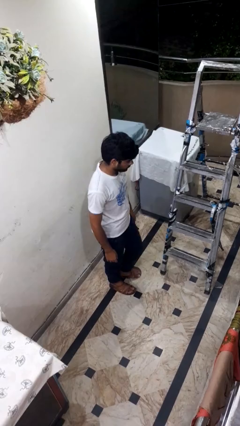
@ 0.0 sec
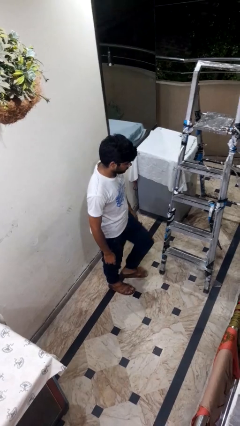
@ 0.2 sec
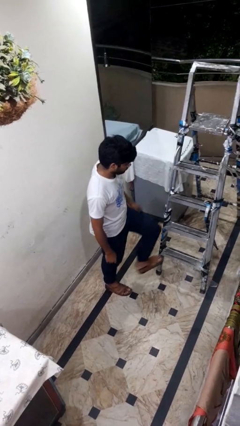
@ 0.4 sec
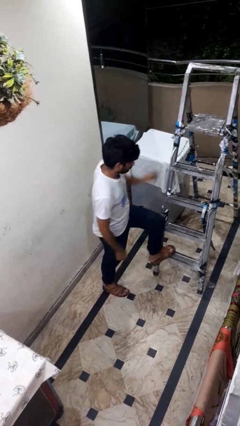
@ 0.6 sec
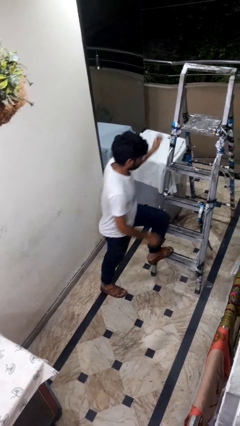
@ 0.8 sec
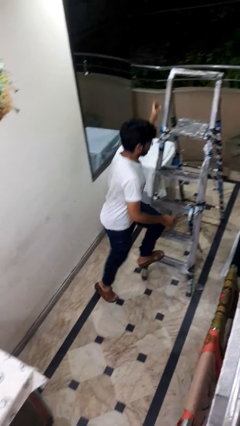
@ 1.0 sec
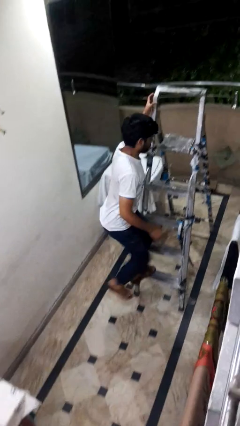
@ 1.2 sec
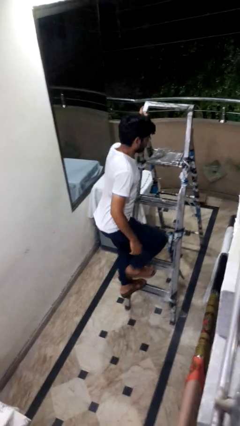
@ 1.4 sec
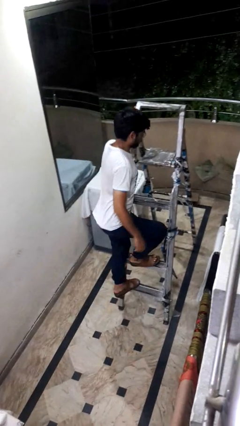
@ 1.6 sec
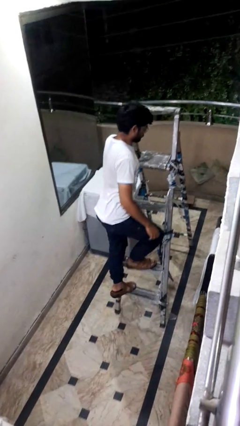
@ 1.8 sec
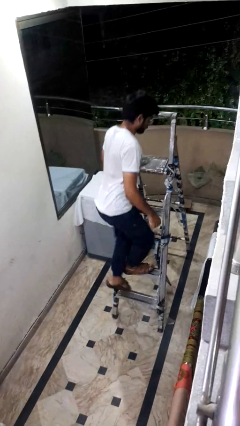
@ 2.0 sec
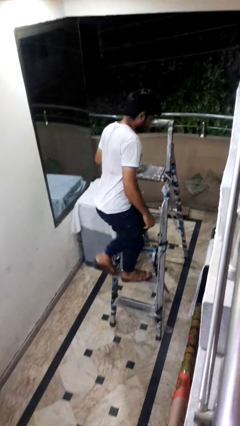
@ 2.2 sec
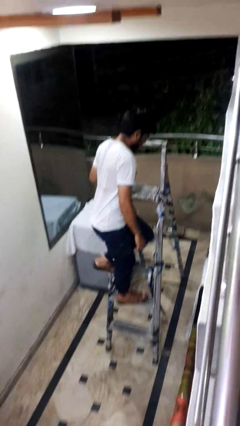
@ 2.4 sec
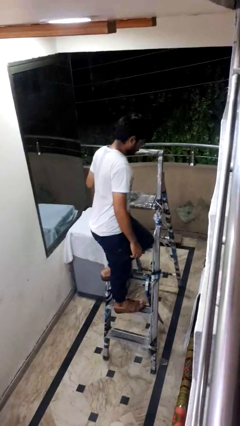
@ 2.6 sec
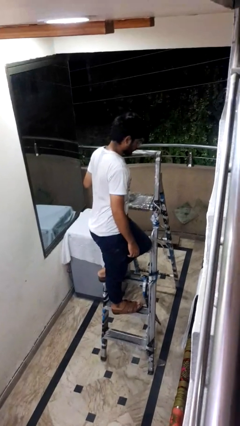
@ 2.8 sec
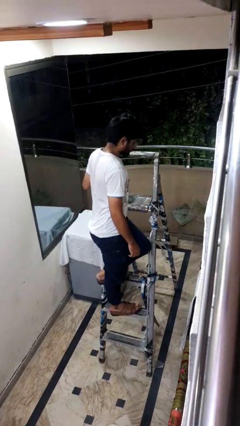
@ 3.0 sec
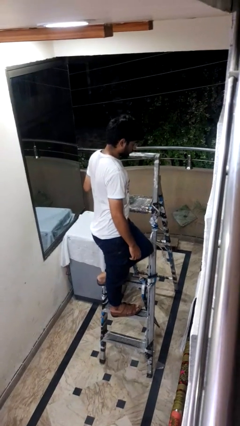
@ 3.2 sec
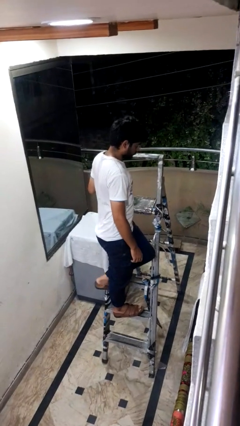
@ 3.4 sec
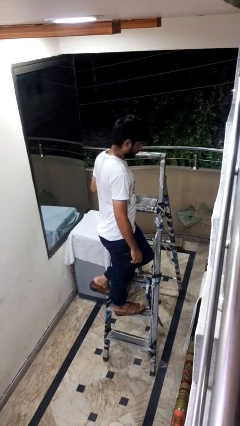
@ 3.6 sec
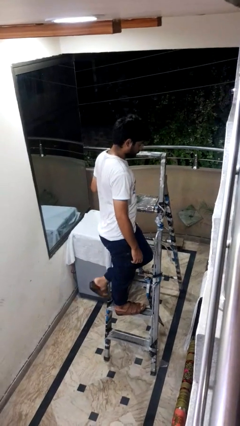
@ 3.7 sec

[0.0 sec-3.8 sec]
person climbs up ladder

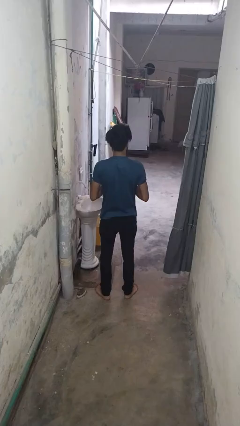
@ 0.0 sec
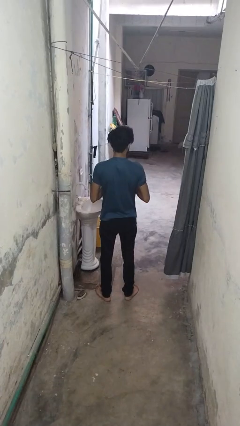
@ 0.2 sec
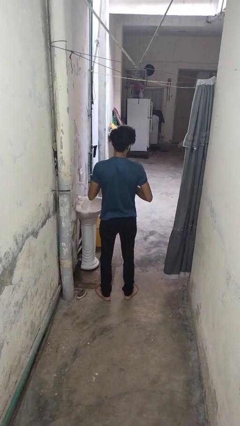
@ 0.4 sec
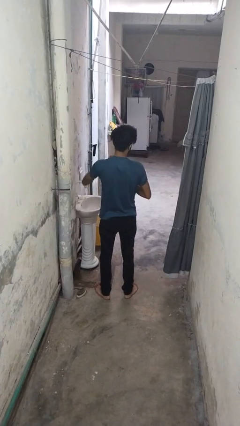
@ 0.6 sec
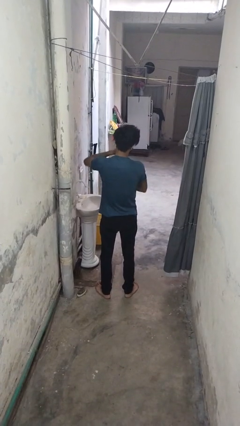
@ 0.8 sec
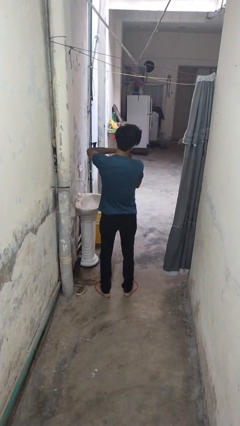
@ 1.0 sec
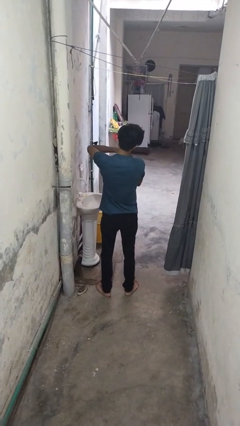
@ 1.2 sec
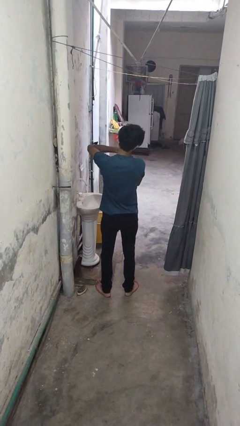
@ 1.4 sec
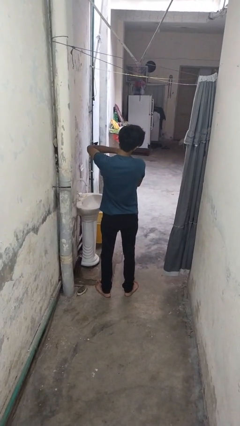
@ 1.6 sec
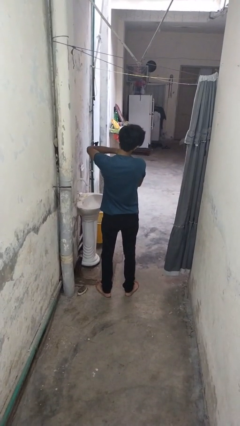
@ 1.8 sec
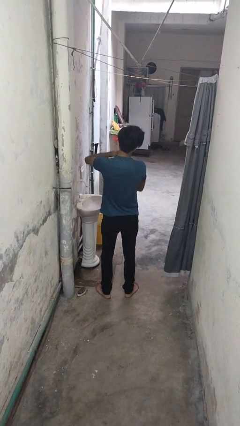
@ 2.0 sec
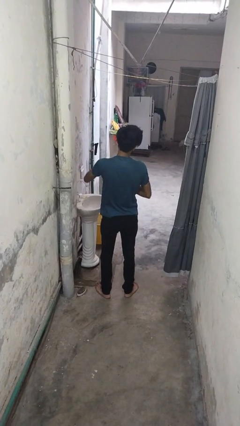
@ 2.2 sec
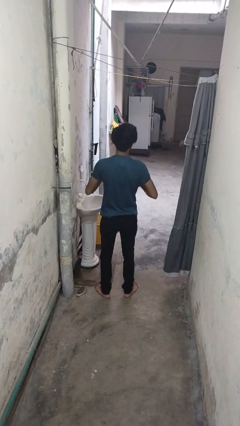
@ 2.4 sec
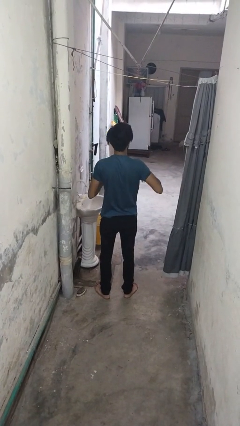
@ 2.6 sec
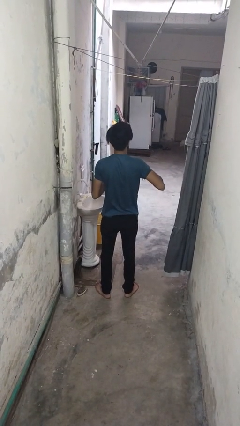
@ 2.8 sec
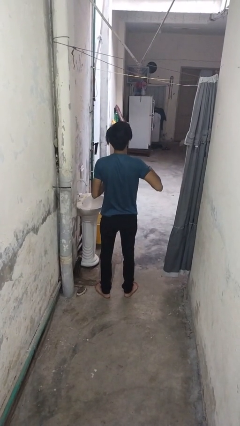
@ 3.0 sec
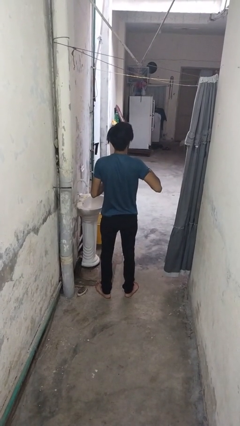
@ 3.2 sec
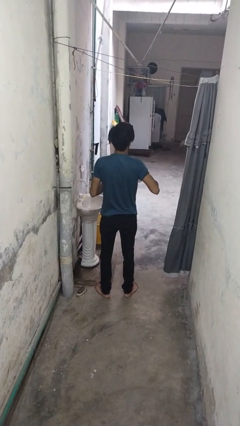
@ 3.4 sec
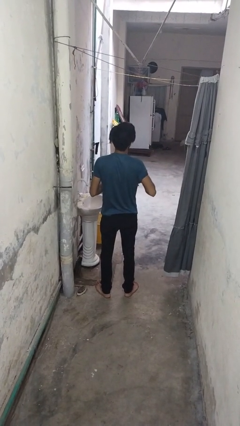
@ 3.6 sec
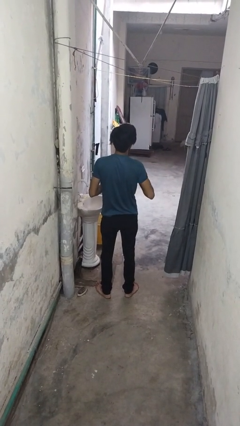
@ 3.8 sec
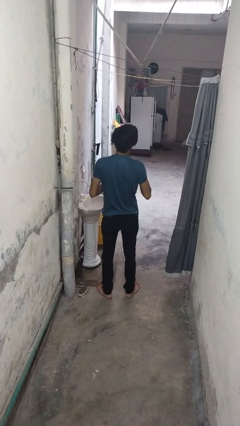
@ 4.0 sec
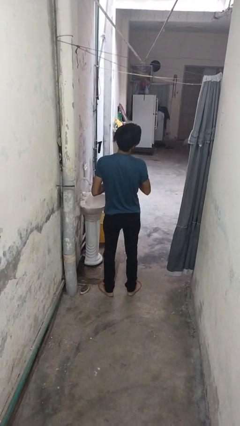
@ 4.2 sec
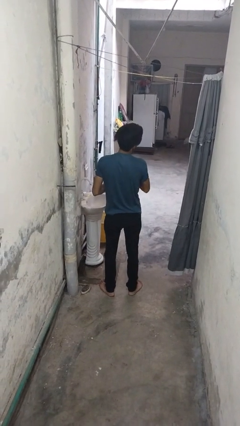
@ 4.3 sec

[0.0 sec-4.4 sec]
person applies deodorant

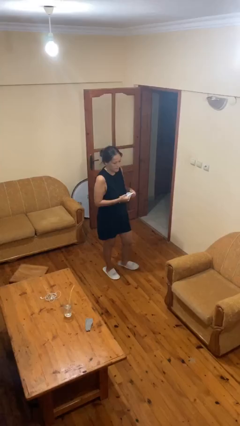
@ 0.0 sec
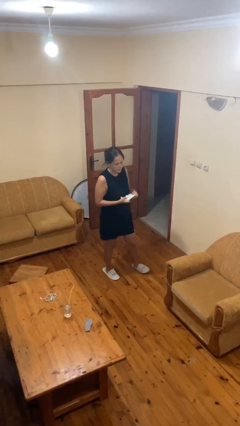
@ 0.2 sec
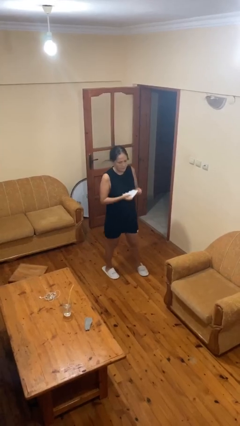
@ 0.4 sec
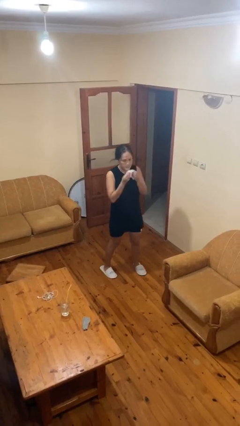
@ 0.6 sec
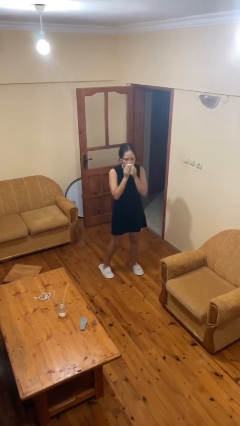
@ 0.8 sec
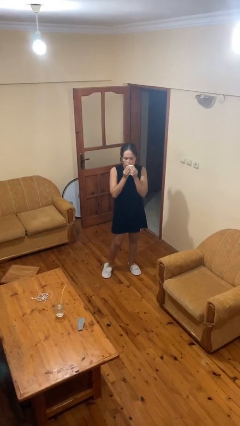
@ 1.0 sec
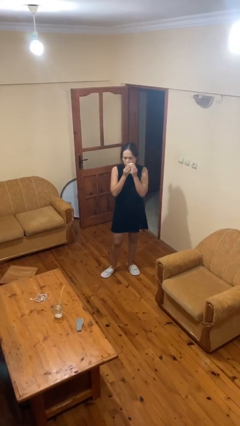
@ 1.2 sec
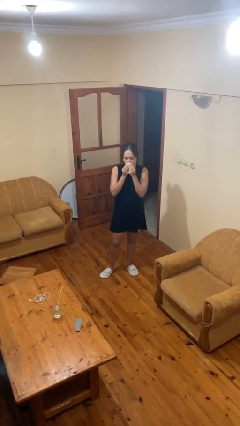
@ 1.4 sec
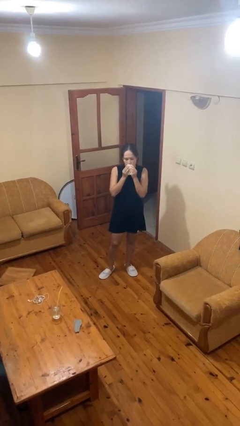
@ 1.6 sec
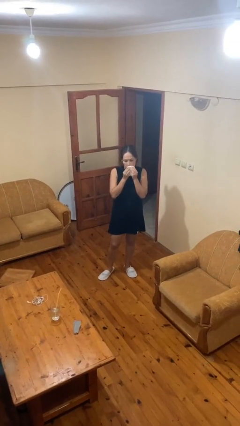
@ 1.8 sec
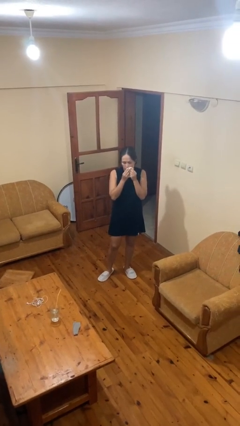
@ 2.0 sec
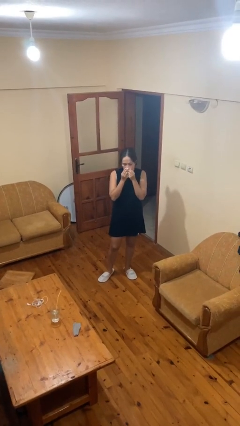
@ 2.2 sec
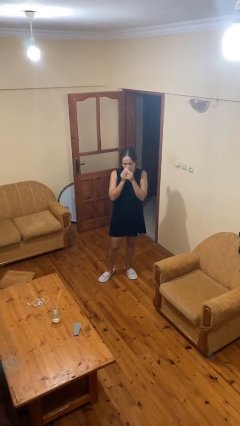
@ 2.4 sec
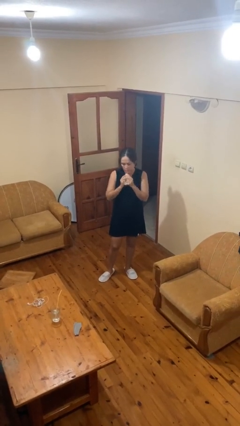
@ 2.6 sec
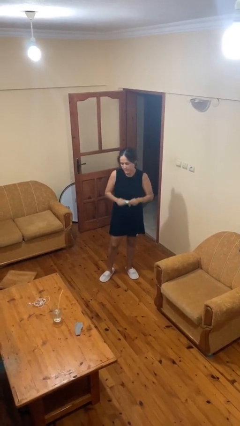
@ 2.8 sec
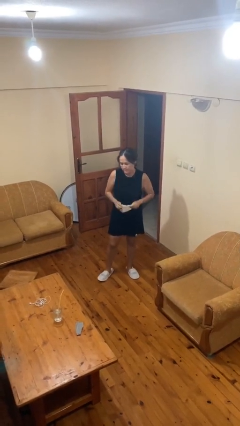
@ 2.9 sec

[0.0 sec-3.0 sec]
person wipes mouth with napkin

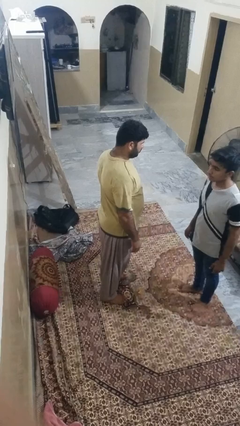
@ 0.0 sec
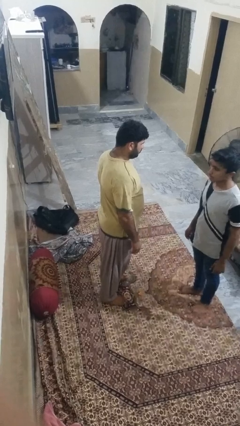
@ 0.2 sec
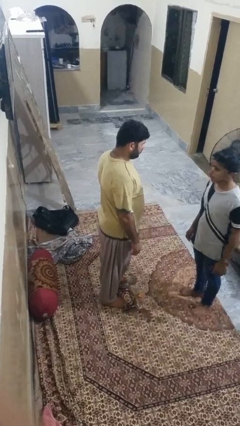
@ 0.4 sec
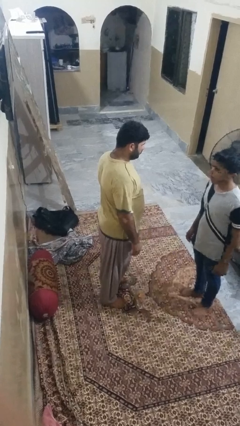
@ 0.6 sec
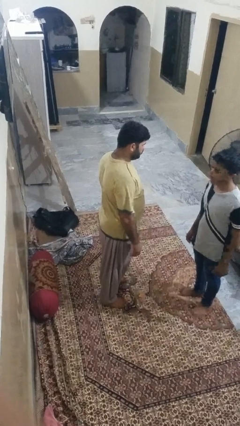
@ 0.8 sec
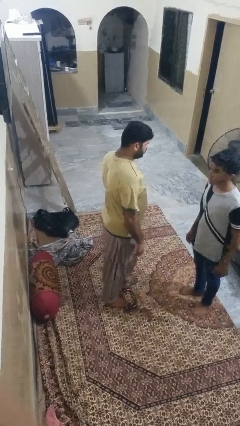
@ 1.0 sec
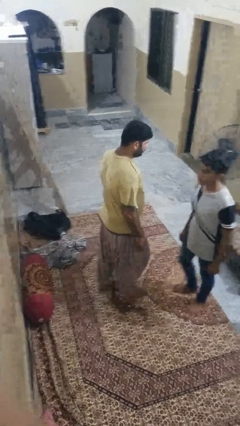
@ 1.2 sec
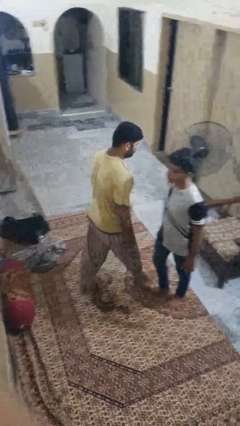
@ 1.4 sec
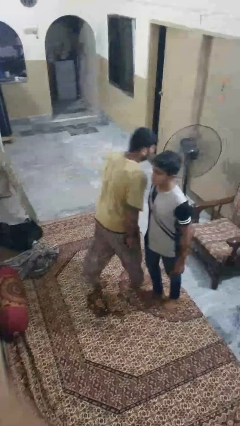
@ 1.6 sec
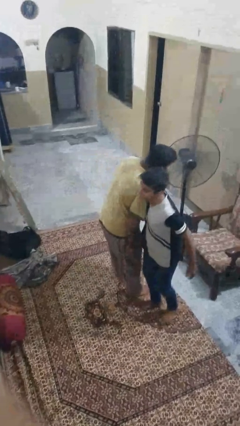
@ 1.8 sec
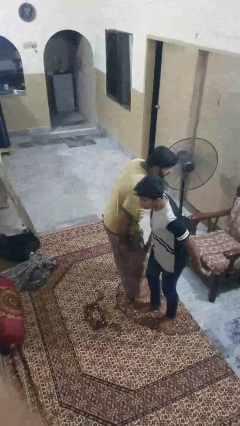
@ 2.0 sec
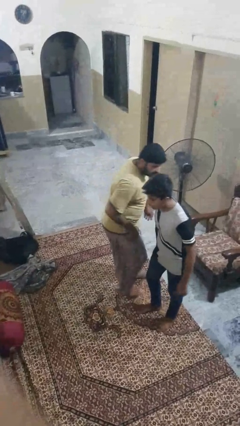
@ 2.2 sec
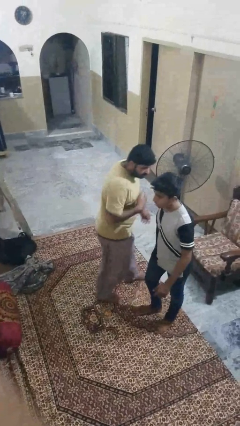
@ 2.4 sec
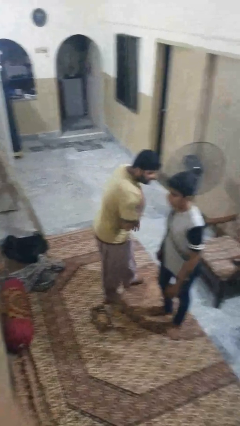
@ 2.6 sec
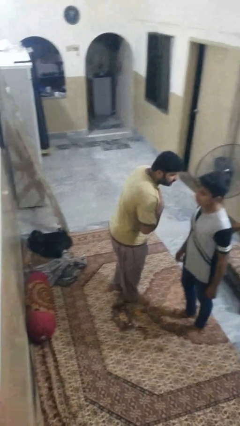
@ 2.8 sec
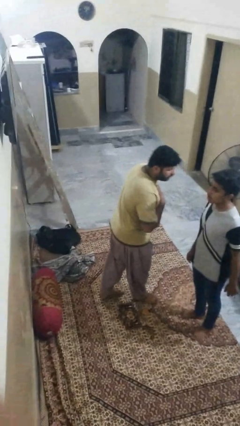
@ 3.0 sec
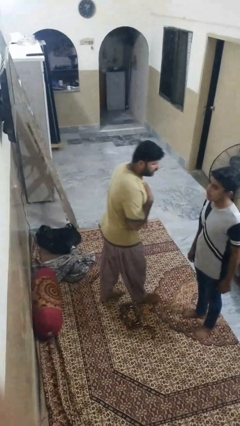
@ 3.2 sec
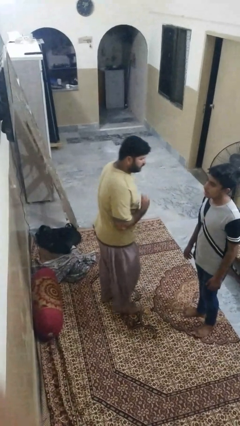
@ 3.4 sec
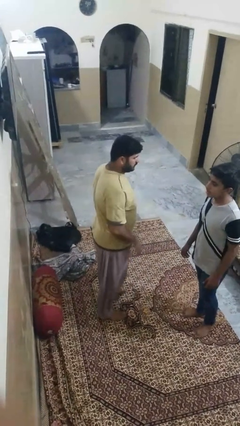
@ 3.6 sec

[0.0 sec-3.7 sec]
person bumps into person

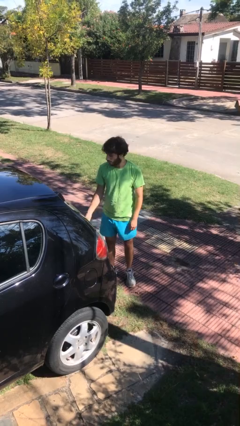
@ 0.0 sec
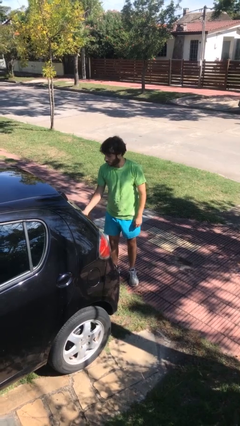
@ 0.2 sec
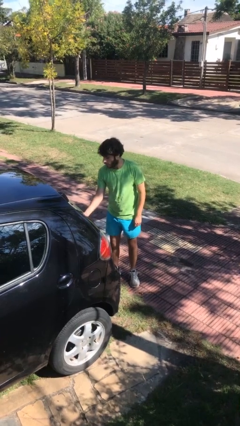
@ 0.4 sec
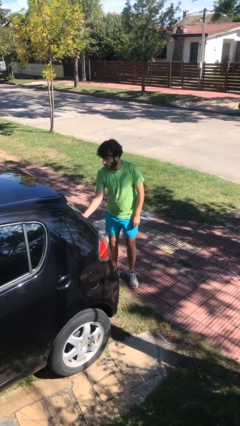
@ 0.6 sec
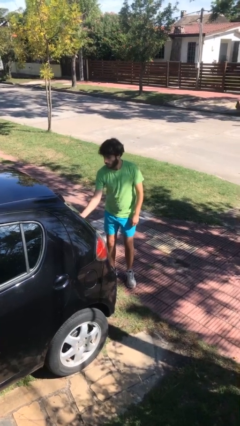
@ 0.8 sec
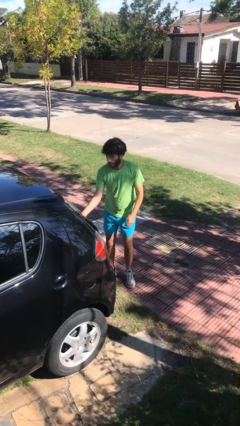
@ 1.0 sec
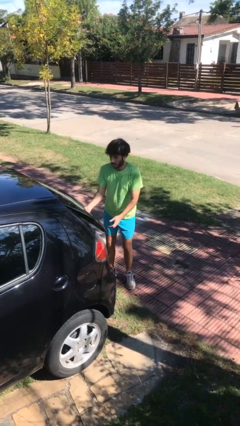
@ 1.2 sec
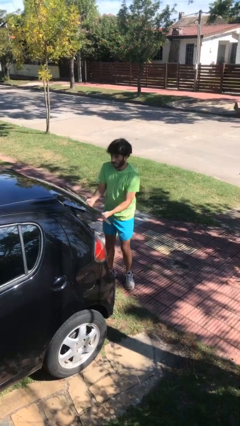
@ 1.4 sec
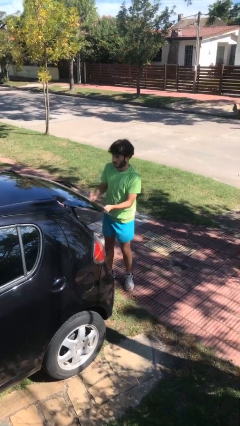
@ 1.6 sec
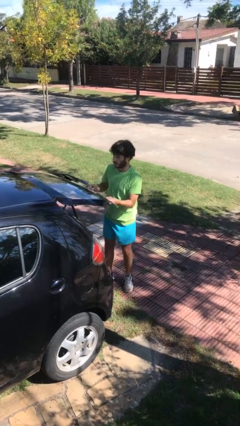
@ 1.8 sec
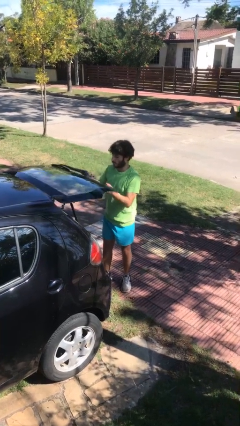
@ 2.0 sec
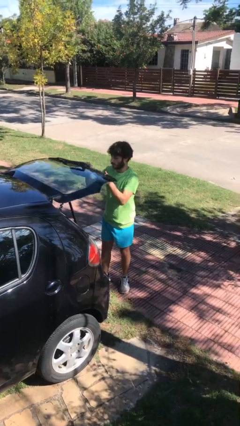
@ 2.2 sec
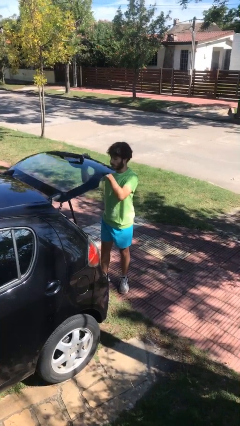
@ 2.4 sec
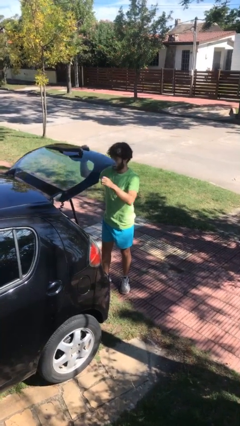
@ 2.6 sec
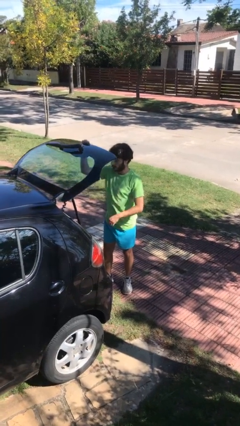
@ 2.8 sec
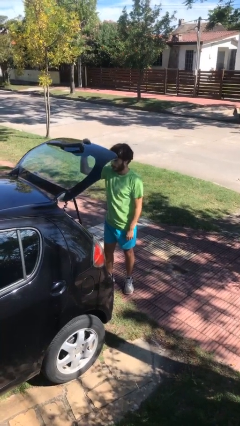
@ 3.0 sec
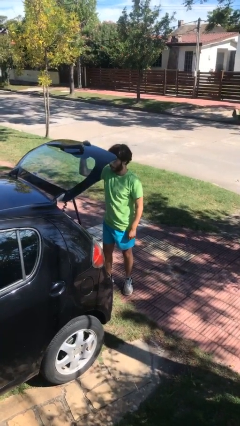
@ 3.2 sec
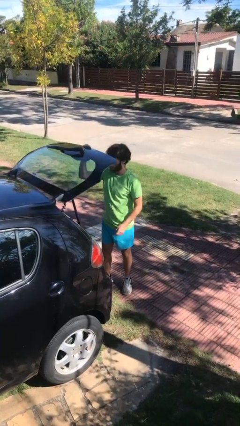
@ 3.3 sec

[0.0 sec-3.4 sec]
person opens car trunk
